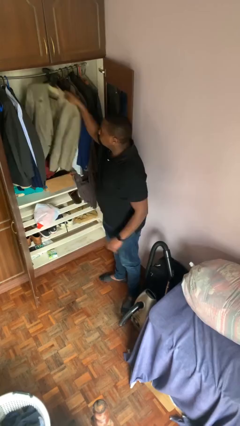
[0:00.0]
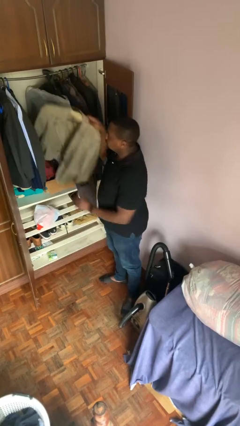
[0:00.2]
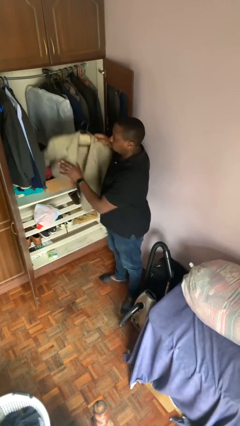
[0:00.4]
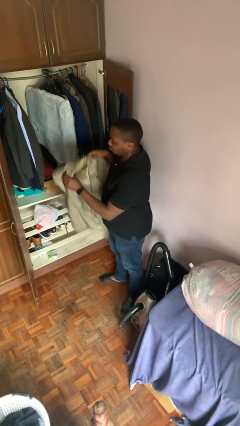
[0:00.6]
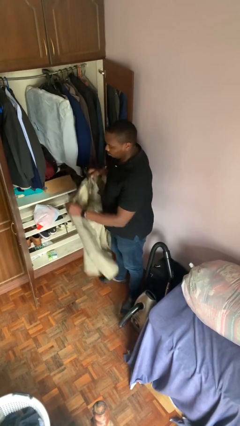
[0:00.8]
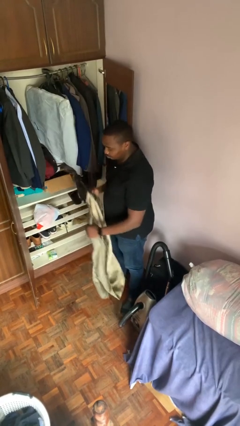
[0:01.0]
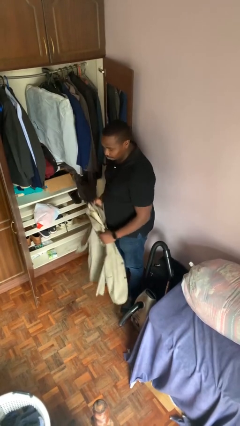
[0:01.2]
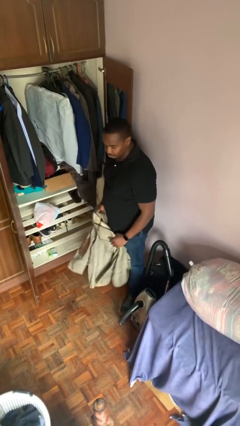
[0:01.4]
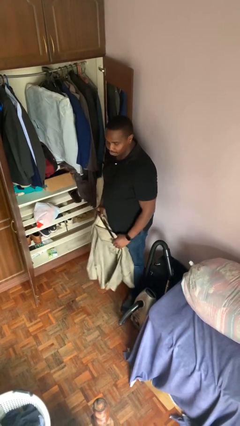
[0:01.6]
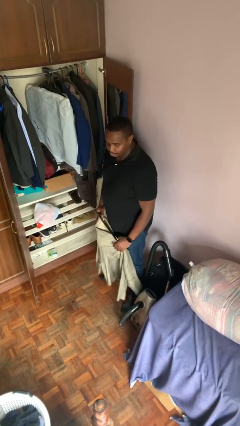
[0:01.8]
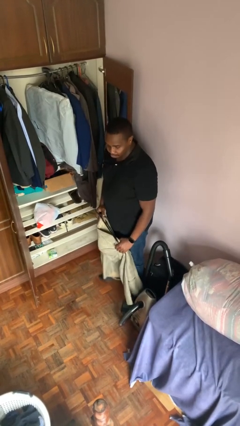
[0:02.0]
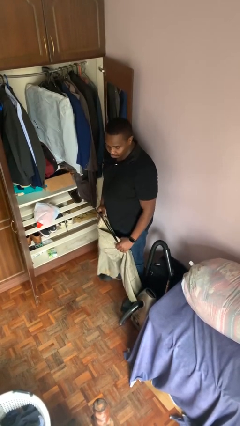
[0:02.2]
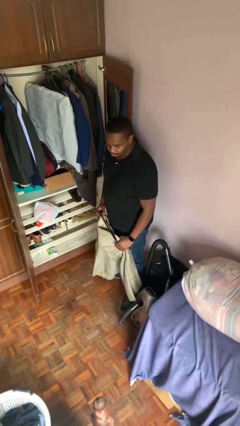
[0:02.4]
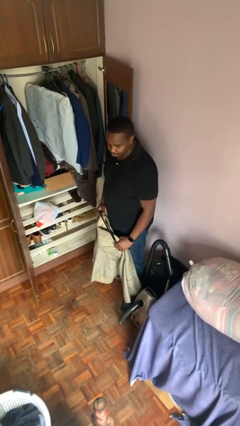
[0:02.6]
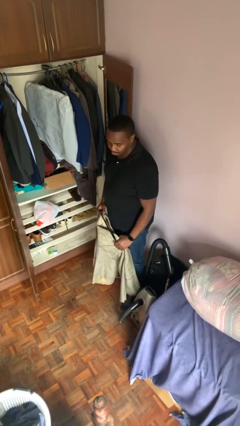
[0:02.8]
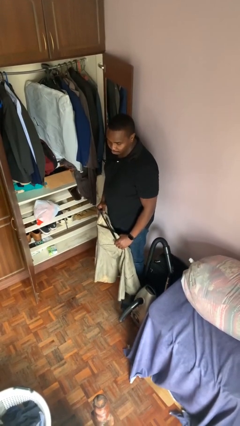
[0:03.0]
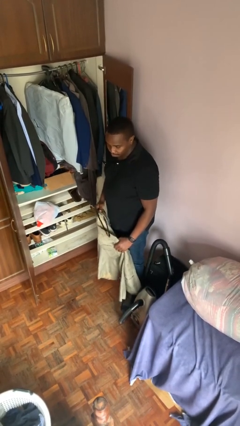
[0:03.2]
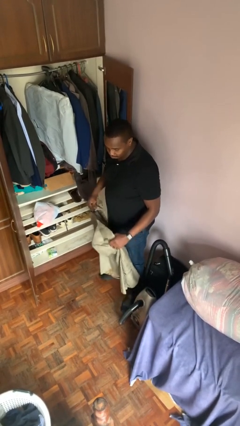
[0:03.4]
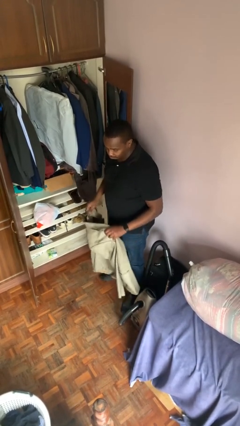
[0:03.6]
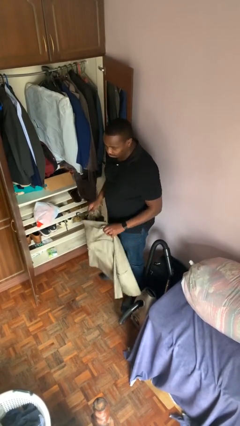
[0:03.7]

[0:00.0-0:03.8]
person takes clothes from closet

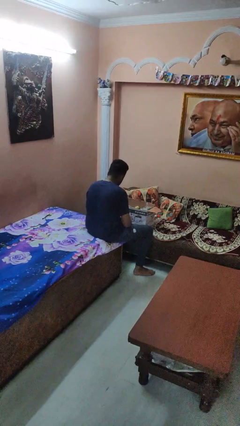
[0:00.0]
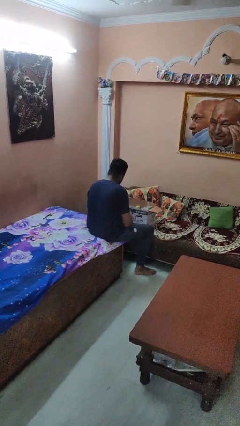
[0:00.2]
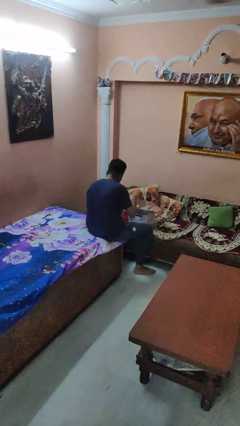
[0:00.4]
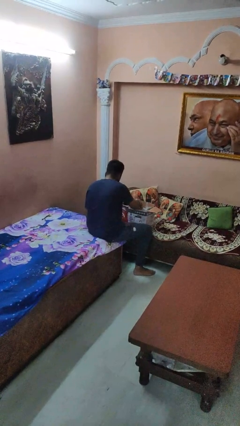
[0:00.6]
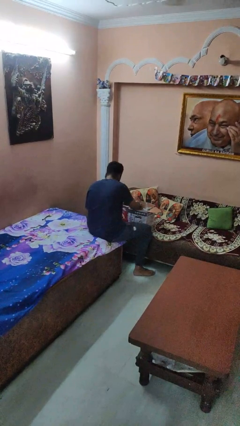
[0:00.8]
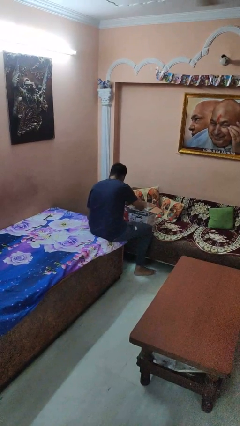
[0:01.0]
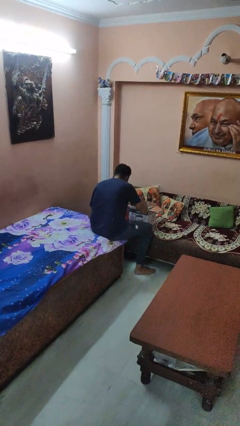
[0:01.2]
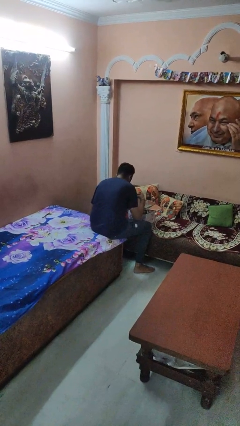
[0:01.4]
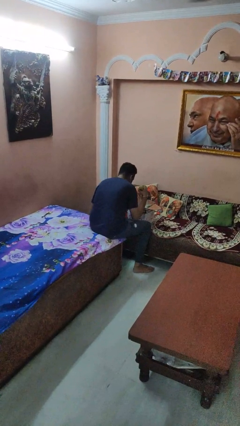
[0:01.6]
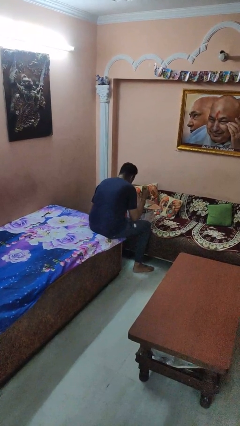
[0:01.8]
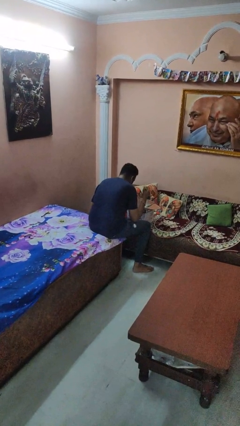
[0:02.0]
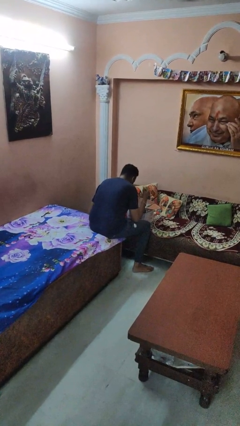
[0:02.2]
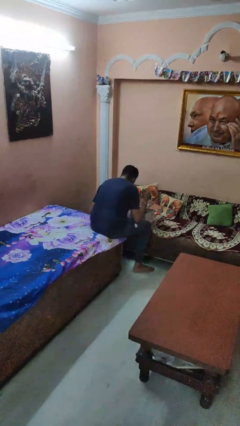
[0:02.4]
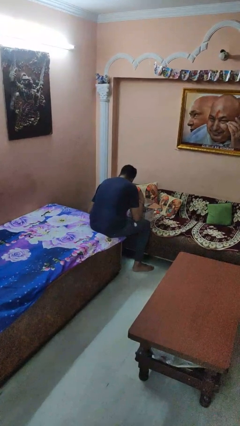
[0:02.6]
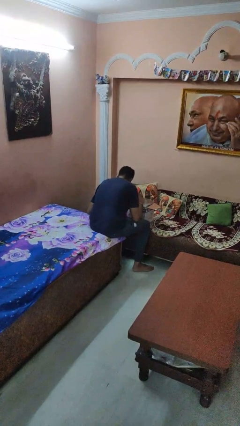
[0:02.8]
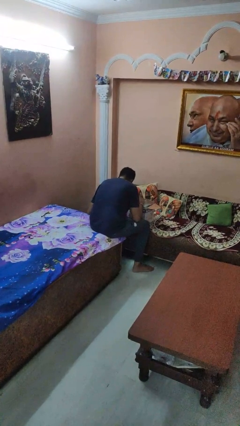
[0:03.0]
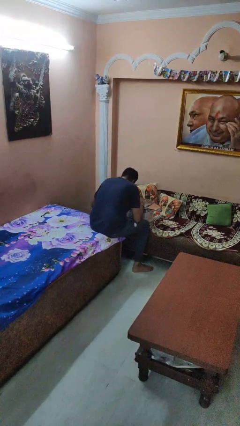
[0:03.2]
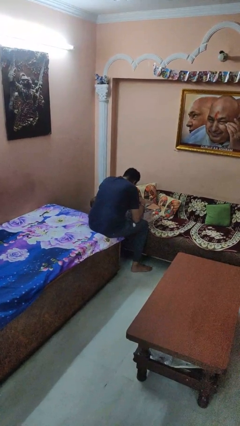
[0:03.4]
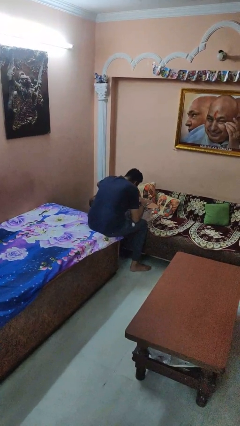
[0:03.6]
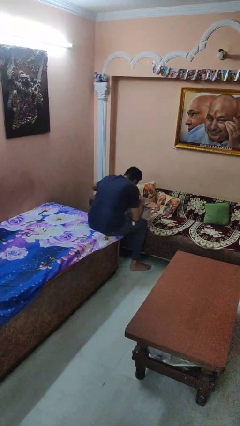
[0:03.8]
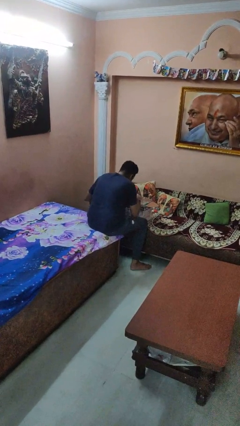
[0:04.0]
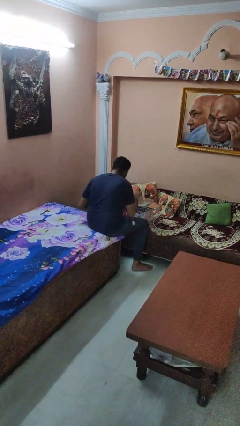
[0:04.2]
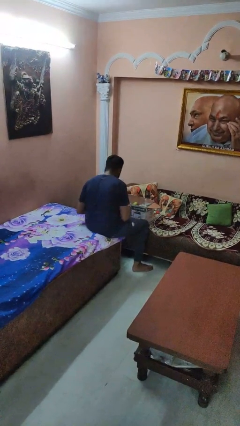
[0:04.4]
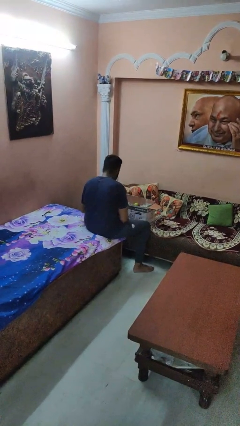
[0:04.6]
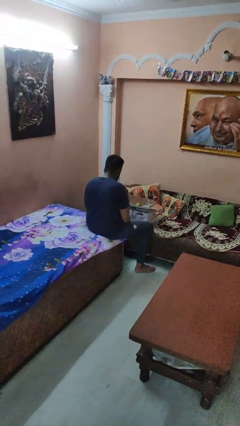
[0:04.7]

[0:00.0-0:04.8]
person searches in box

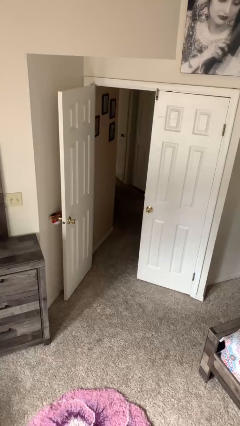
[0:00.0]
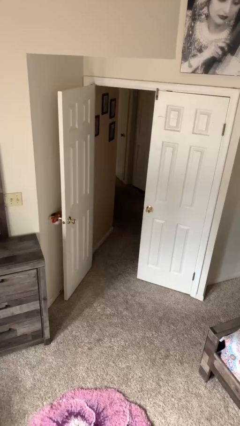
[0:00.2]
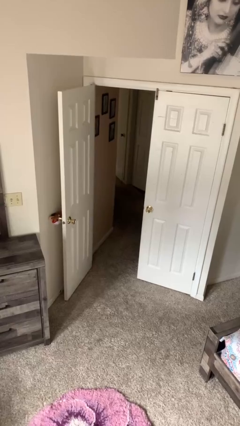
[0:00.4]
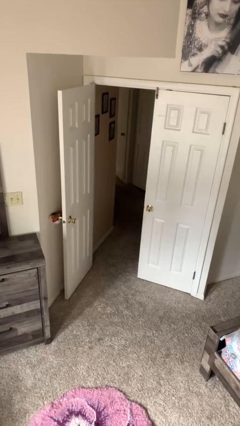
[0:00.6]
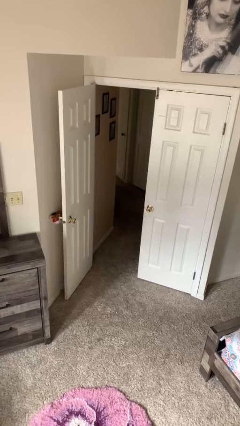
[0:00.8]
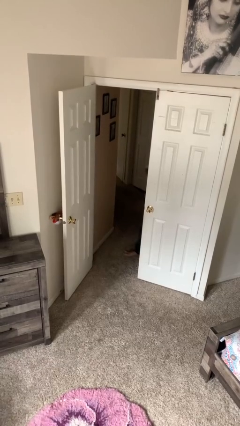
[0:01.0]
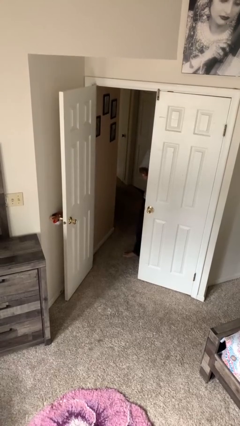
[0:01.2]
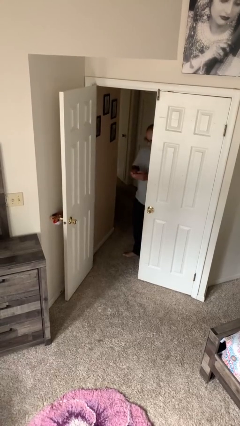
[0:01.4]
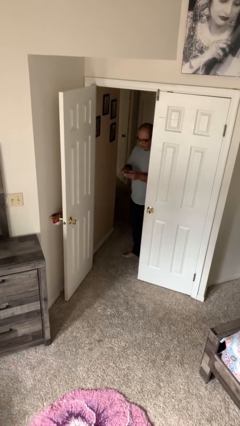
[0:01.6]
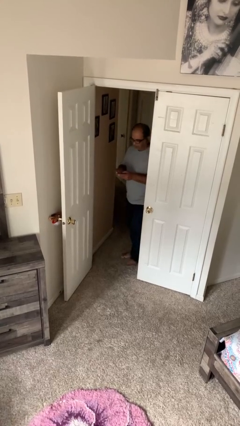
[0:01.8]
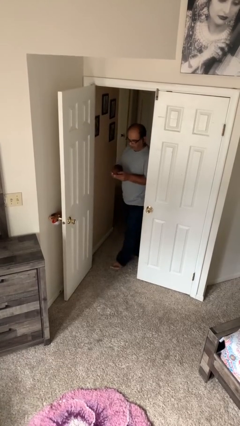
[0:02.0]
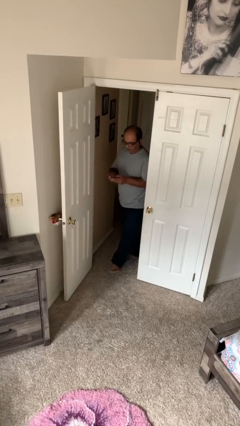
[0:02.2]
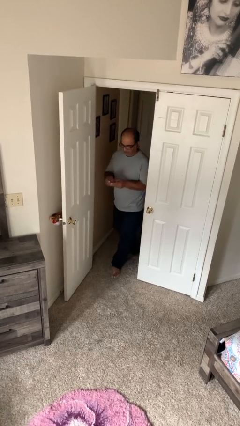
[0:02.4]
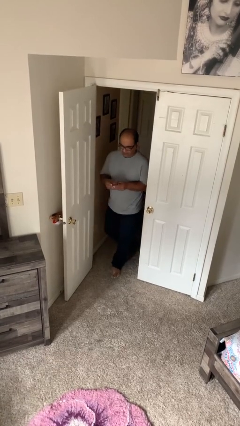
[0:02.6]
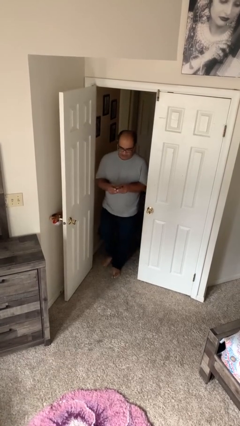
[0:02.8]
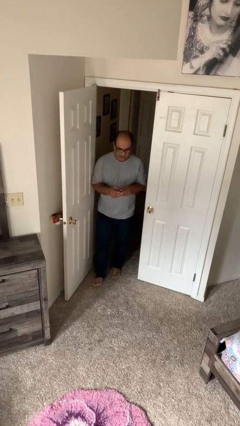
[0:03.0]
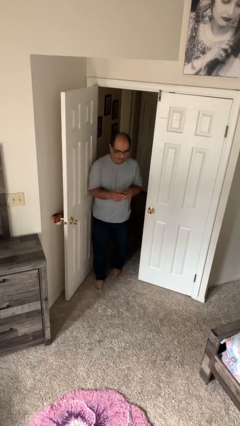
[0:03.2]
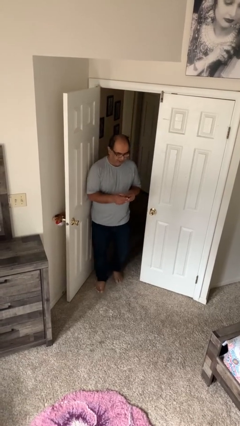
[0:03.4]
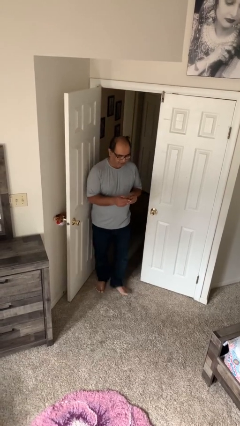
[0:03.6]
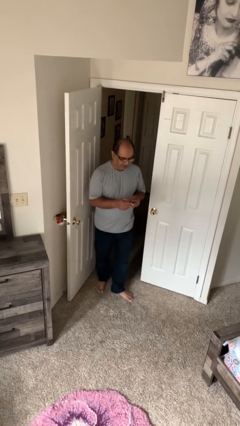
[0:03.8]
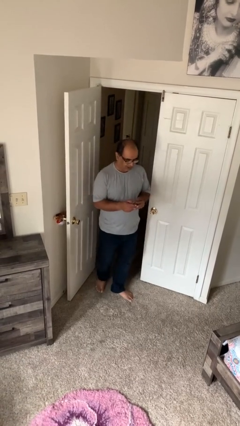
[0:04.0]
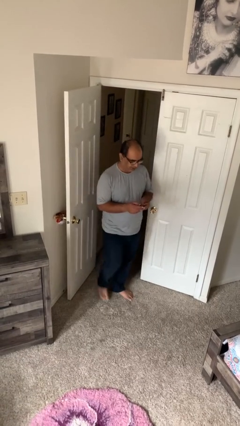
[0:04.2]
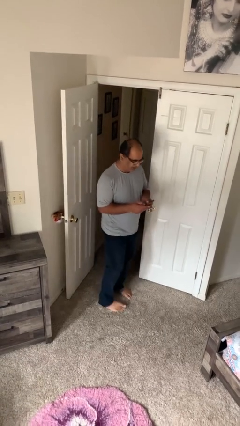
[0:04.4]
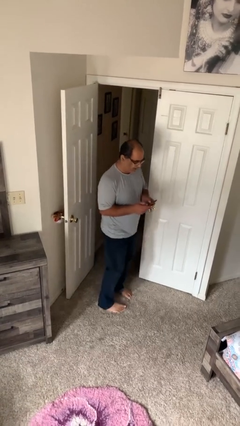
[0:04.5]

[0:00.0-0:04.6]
person enters scene through structure

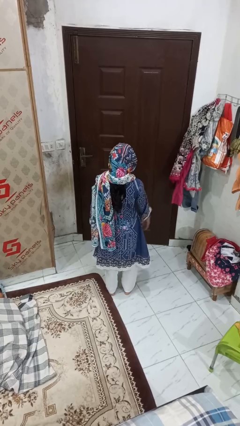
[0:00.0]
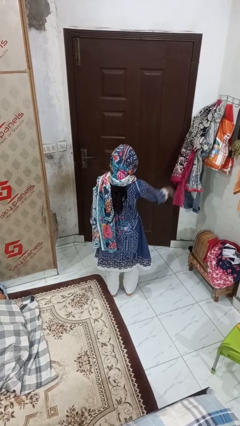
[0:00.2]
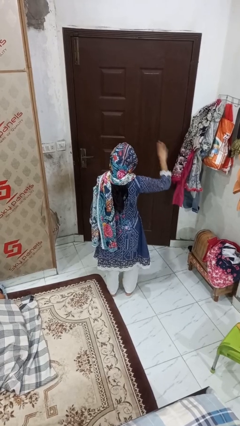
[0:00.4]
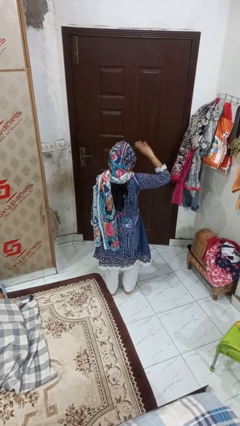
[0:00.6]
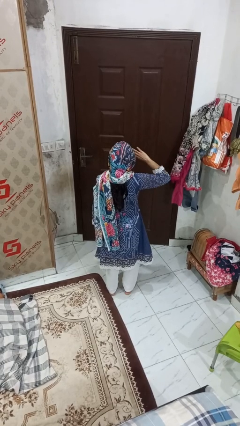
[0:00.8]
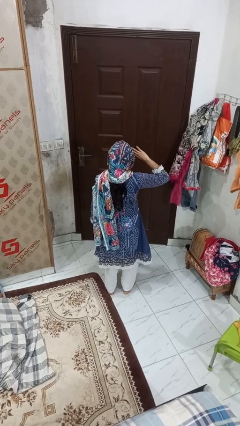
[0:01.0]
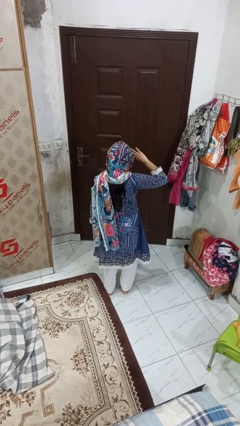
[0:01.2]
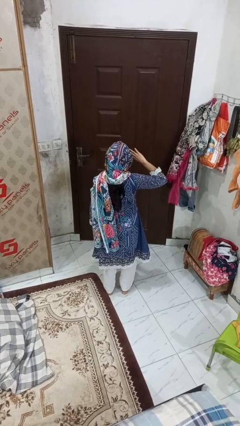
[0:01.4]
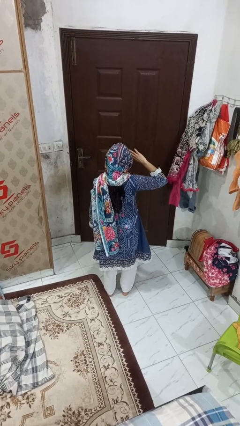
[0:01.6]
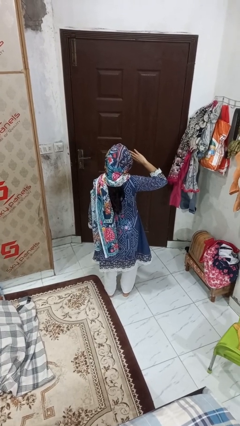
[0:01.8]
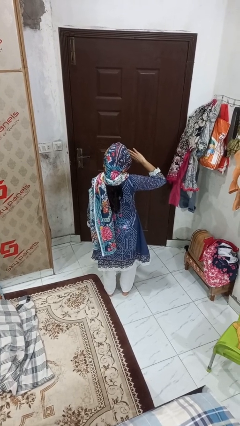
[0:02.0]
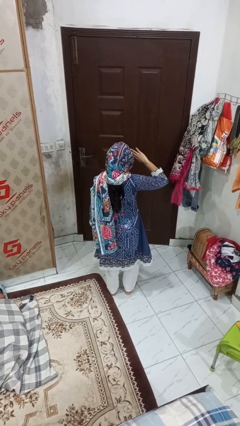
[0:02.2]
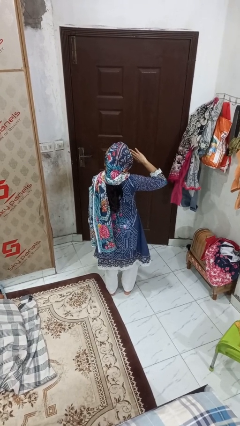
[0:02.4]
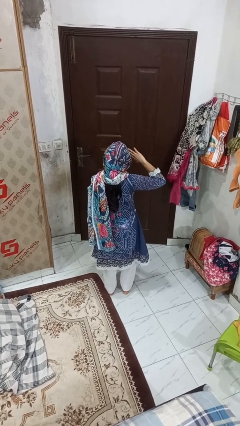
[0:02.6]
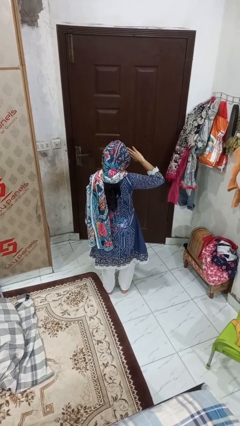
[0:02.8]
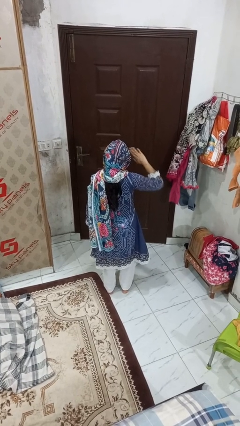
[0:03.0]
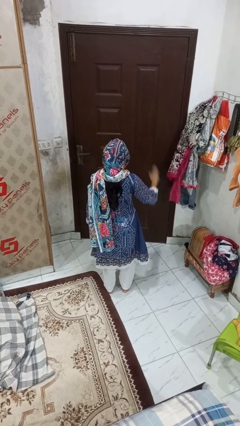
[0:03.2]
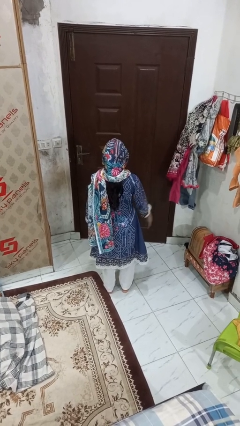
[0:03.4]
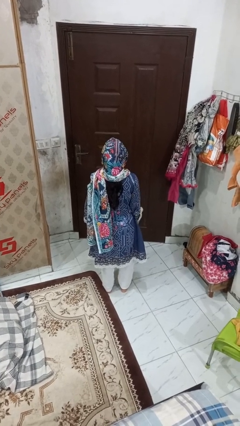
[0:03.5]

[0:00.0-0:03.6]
person salutes

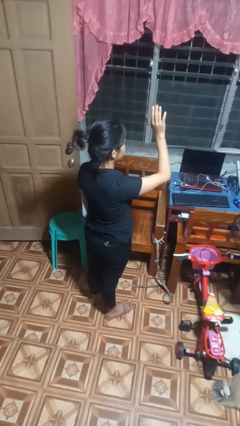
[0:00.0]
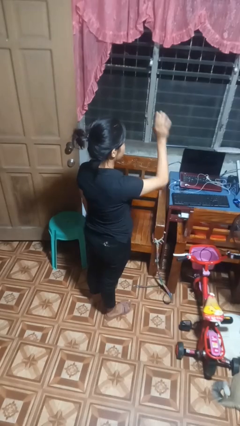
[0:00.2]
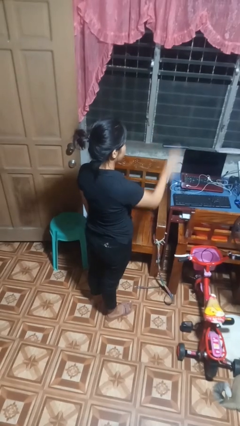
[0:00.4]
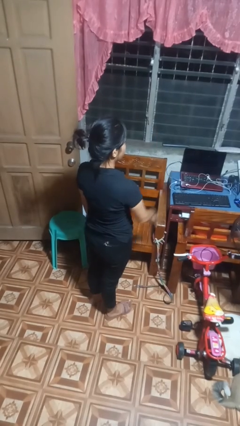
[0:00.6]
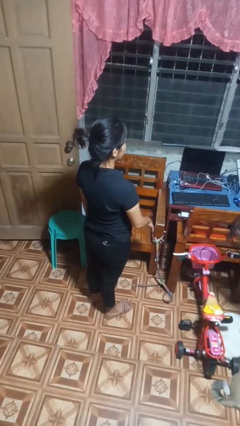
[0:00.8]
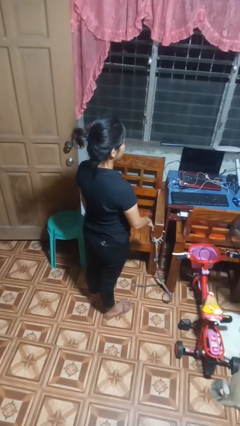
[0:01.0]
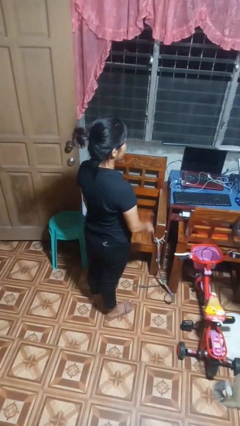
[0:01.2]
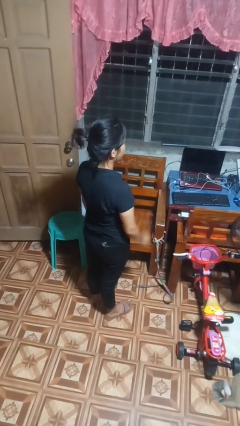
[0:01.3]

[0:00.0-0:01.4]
person gestures swipe down
